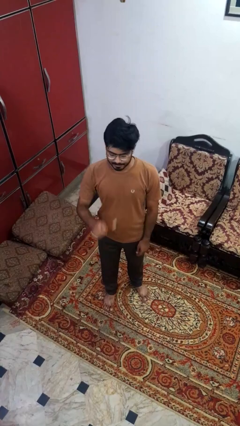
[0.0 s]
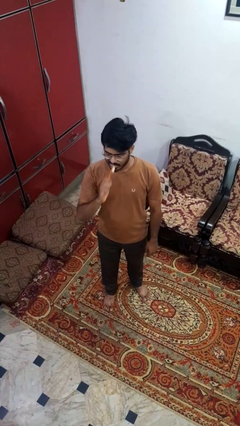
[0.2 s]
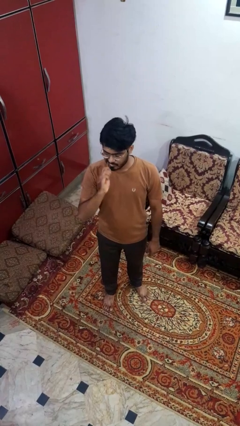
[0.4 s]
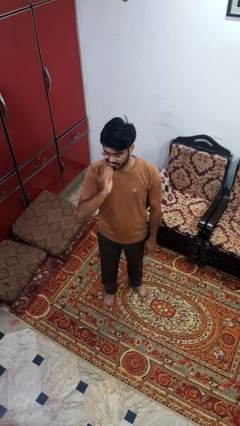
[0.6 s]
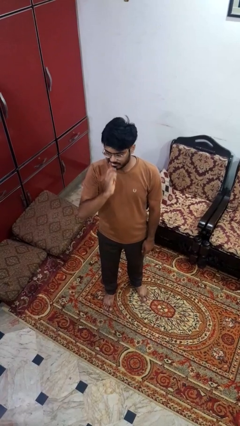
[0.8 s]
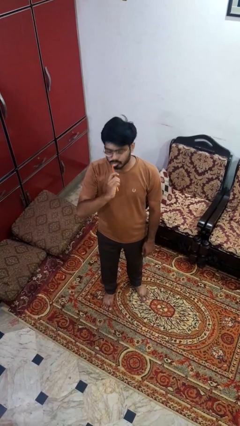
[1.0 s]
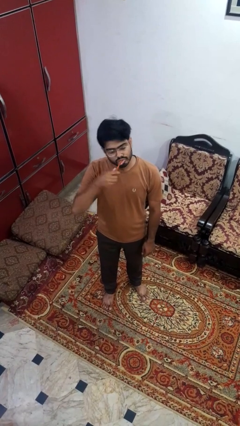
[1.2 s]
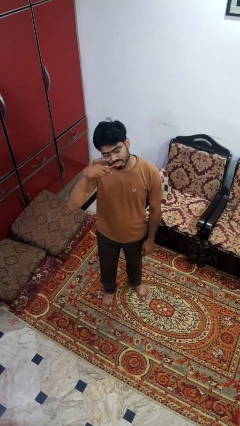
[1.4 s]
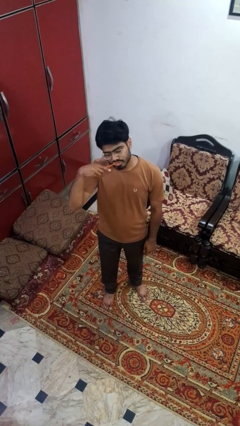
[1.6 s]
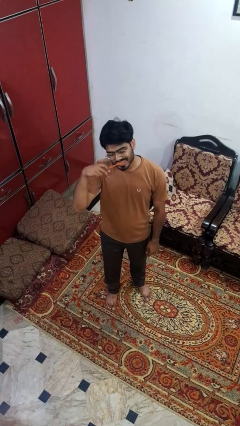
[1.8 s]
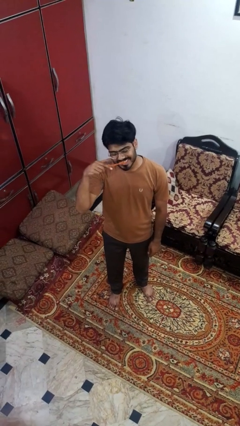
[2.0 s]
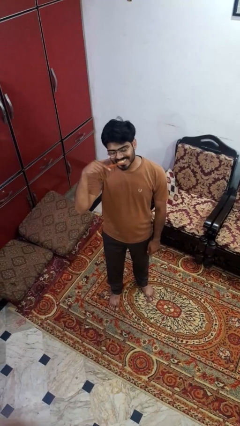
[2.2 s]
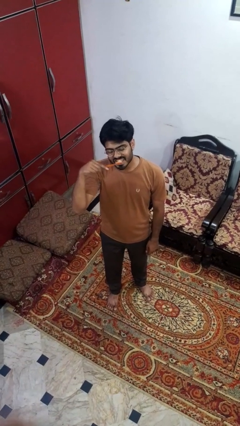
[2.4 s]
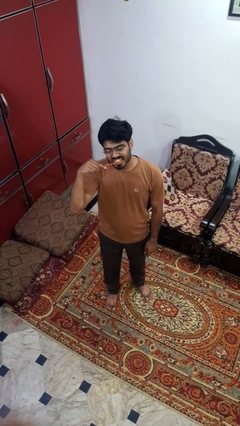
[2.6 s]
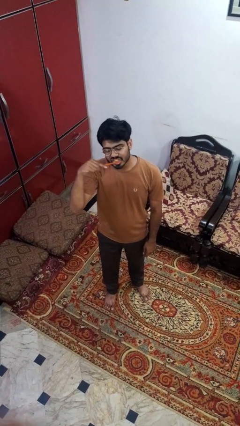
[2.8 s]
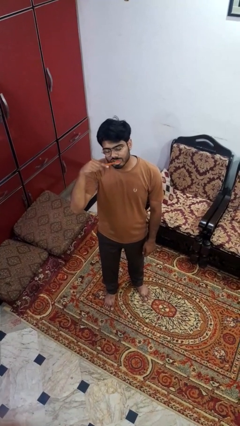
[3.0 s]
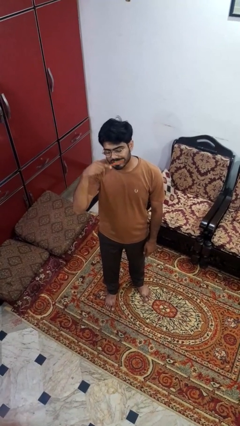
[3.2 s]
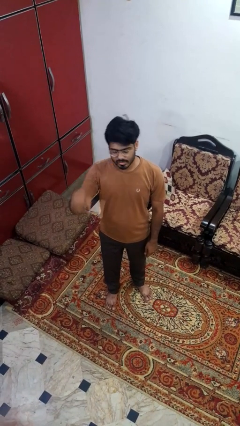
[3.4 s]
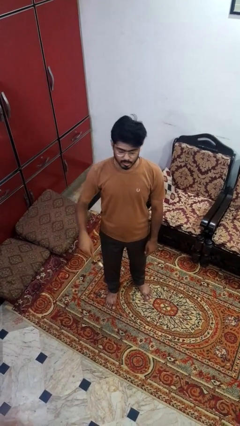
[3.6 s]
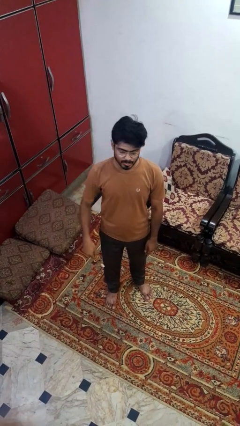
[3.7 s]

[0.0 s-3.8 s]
person brushes teeth

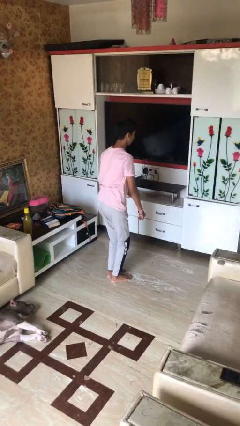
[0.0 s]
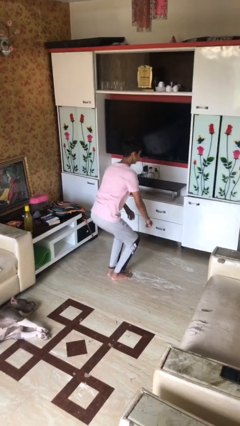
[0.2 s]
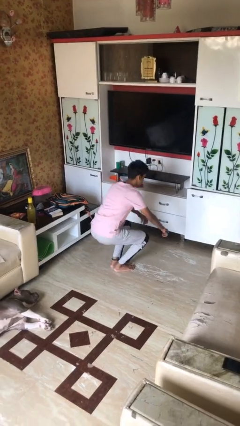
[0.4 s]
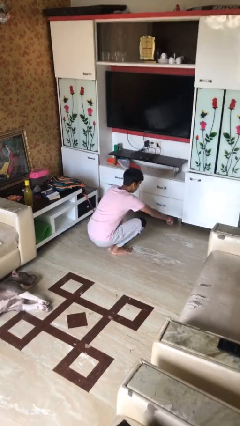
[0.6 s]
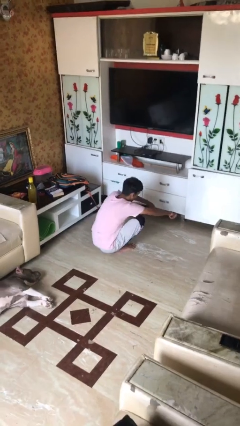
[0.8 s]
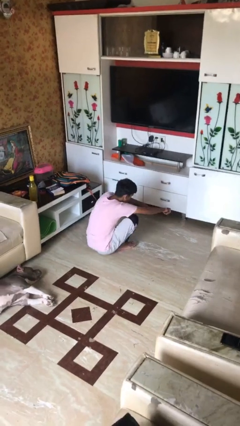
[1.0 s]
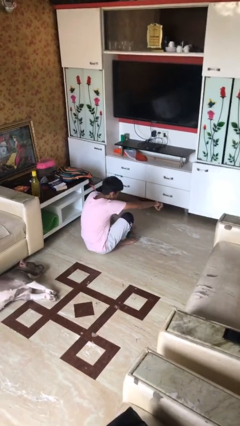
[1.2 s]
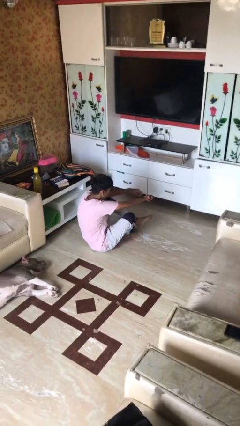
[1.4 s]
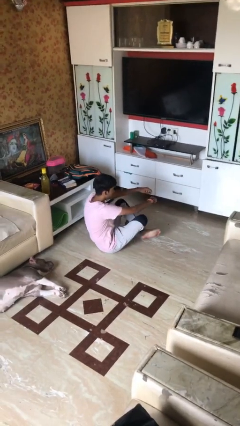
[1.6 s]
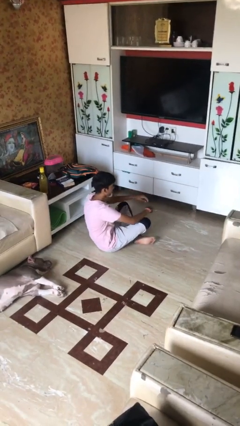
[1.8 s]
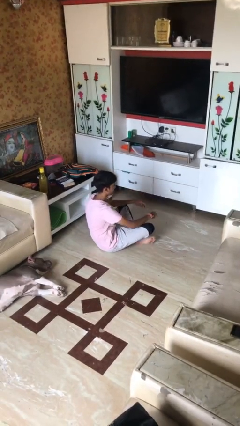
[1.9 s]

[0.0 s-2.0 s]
person sits crisscross

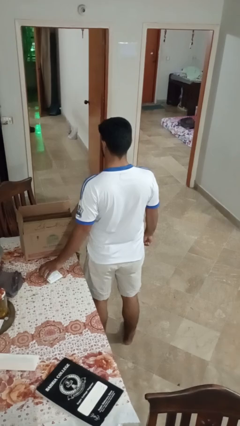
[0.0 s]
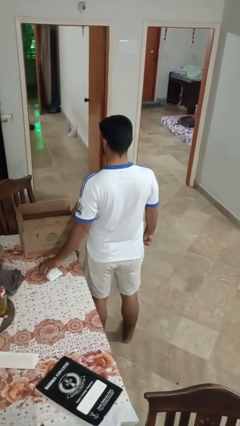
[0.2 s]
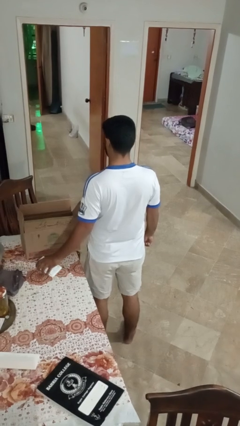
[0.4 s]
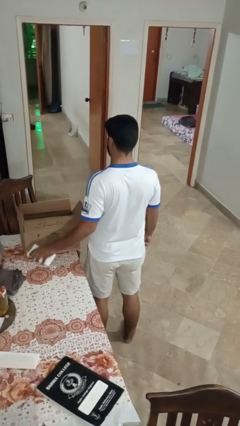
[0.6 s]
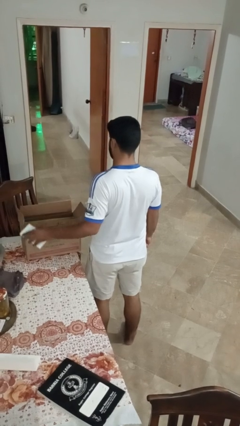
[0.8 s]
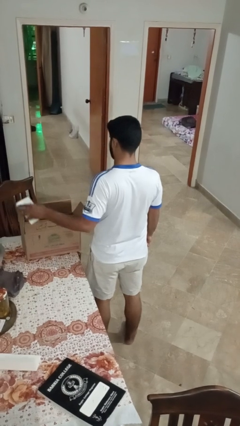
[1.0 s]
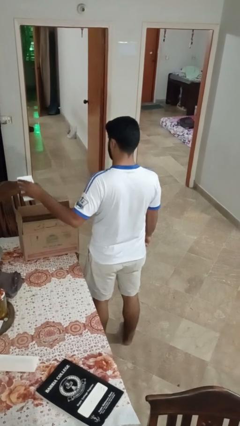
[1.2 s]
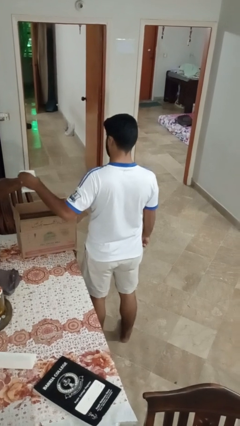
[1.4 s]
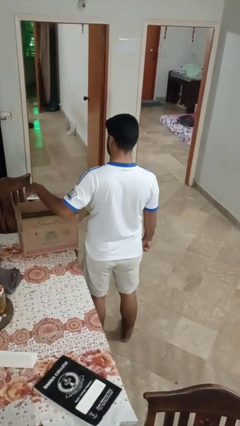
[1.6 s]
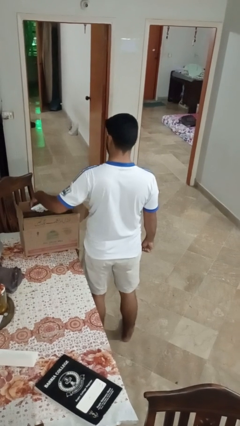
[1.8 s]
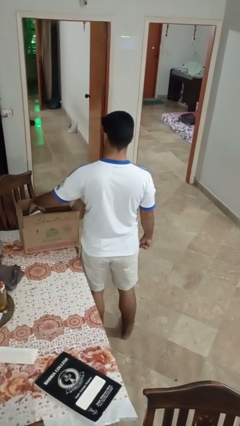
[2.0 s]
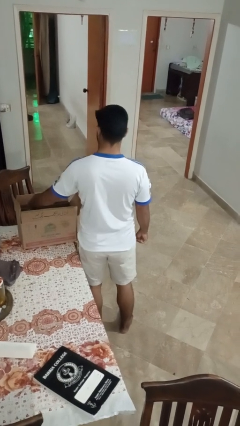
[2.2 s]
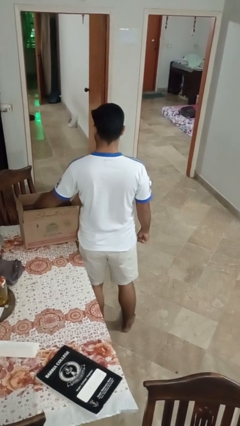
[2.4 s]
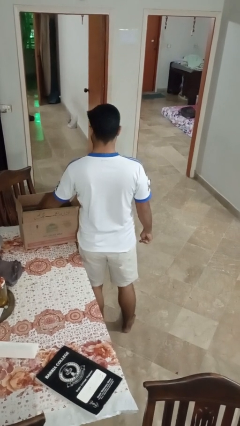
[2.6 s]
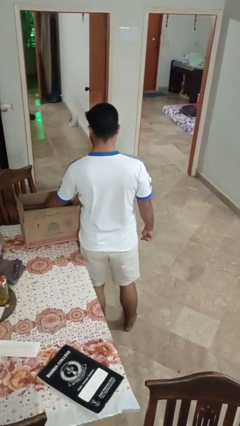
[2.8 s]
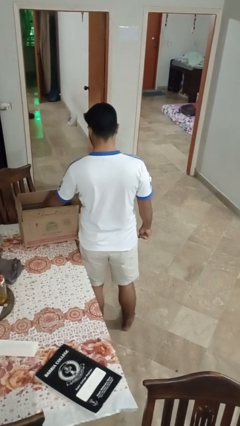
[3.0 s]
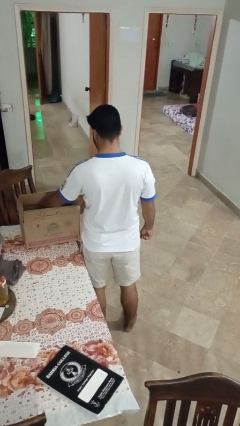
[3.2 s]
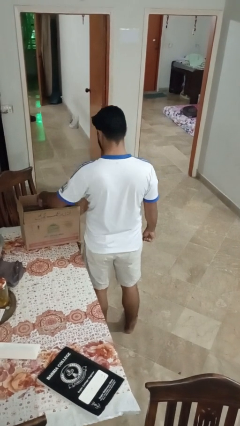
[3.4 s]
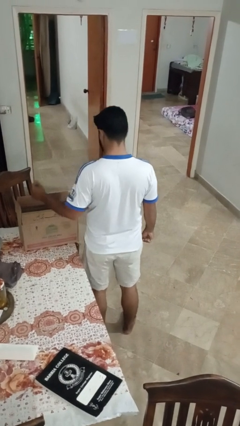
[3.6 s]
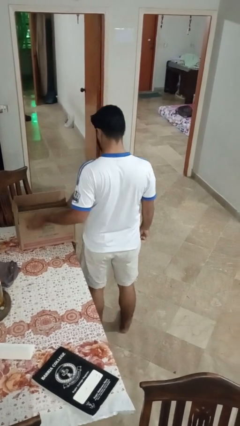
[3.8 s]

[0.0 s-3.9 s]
person puts object into box

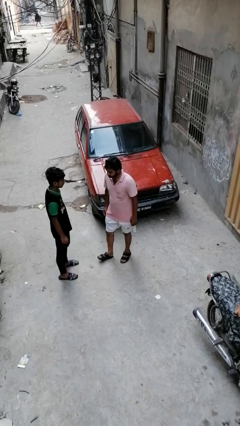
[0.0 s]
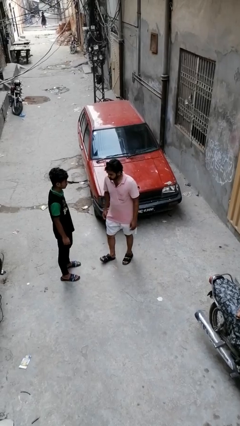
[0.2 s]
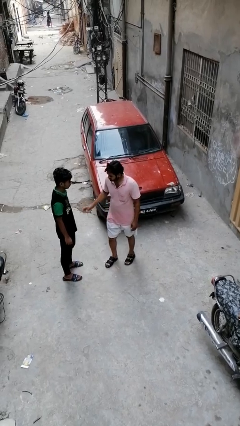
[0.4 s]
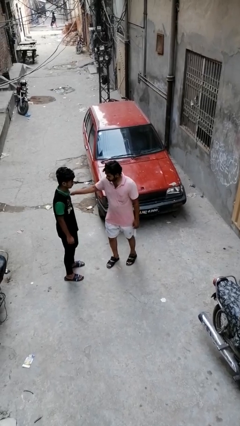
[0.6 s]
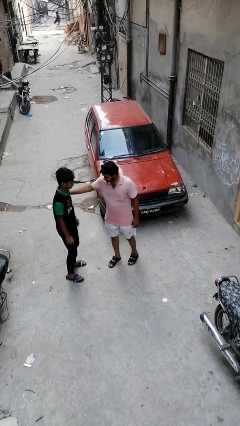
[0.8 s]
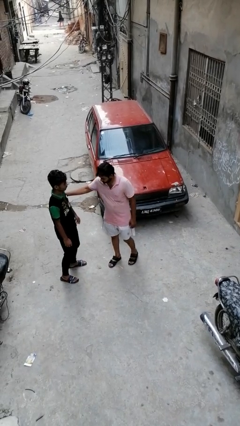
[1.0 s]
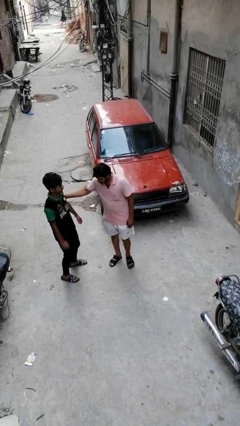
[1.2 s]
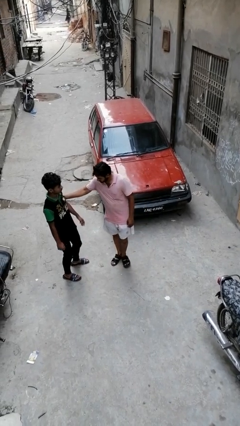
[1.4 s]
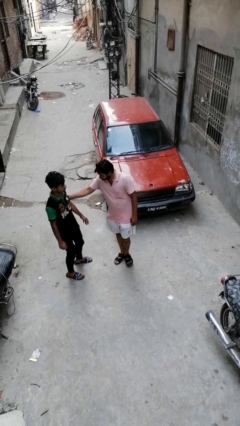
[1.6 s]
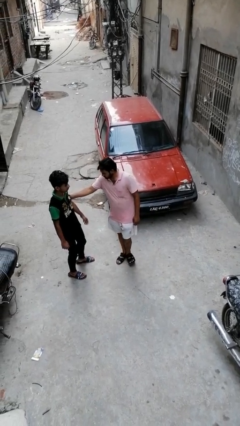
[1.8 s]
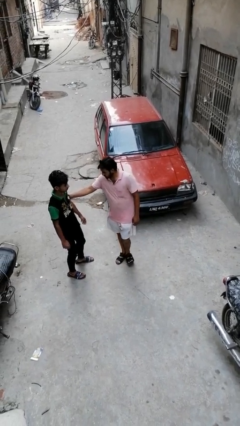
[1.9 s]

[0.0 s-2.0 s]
person grabs person by bicep

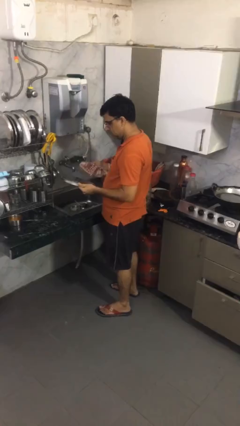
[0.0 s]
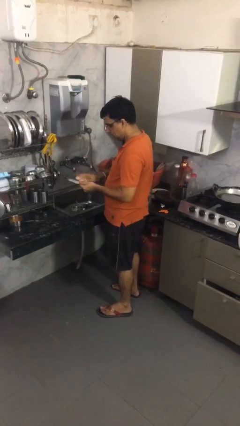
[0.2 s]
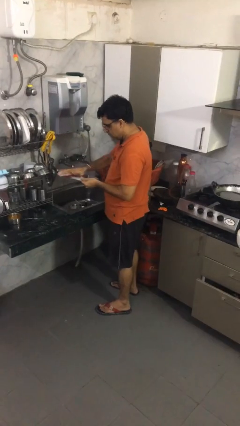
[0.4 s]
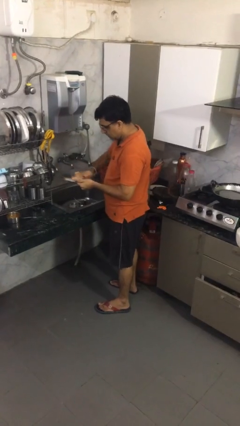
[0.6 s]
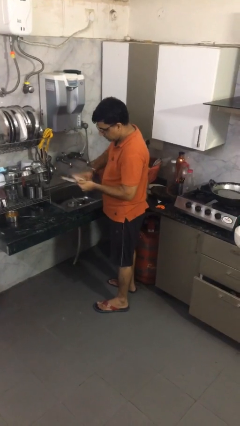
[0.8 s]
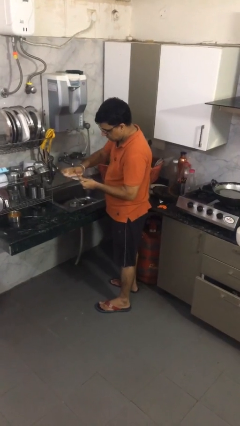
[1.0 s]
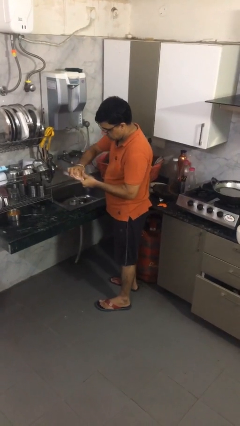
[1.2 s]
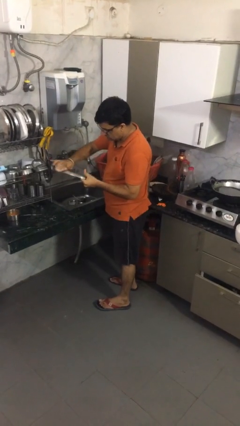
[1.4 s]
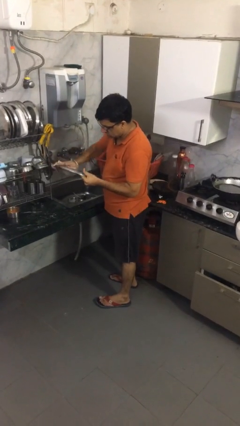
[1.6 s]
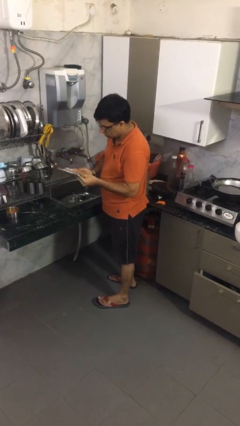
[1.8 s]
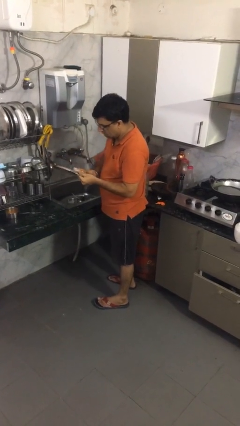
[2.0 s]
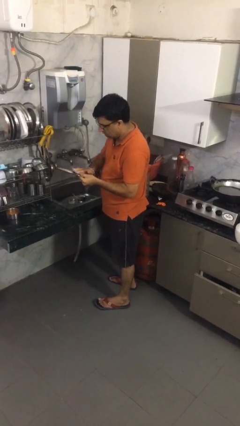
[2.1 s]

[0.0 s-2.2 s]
person dries dish

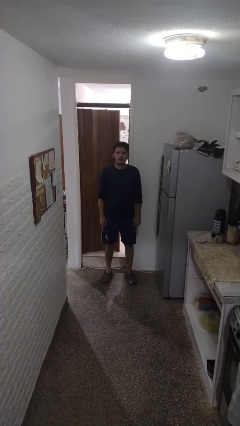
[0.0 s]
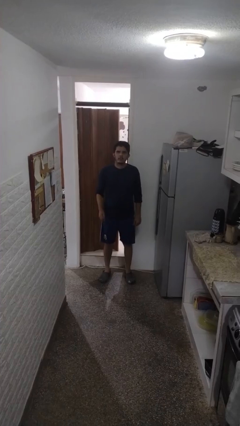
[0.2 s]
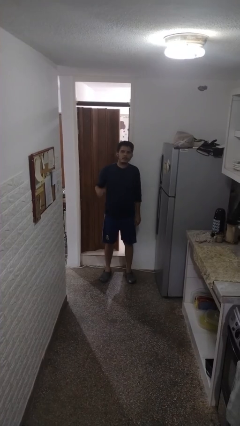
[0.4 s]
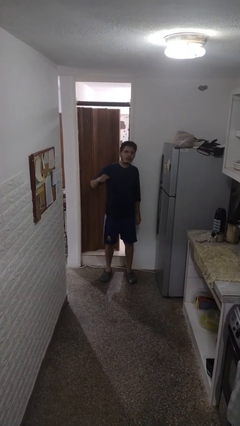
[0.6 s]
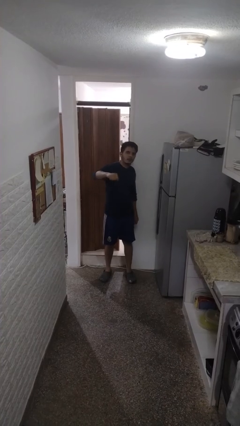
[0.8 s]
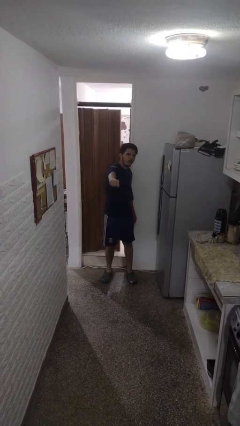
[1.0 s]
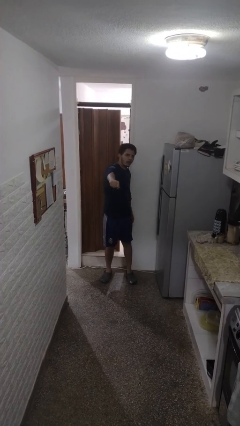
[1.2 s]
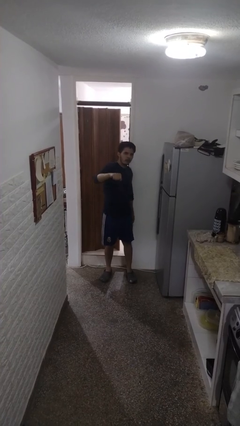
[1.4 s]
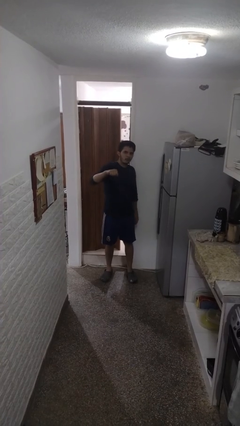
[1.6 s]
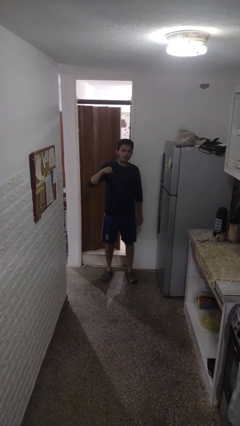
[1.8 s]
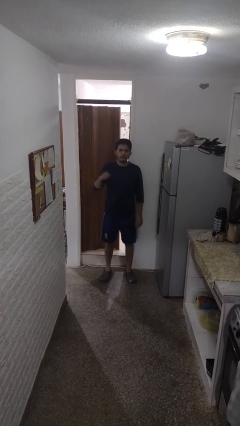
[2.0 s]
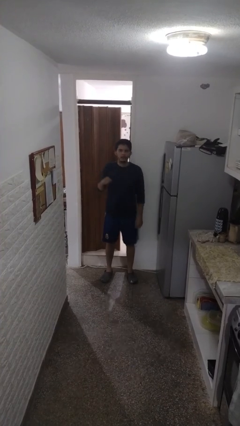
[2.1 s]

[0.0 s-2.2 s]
person punches

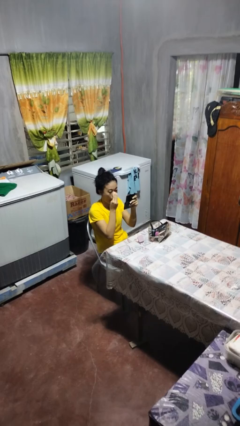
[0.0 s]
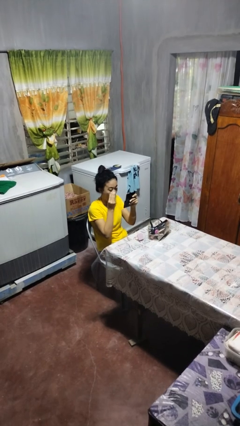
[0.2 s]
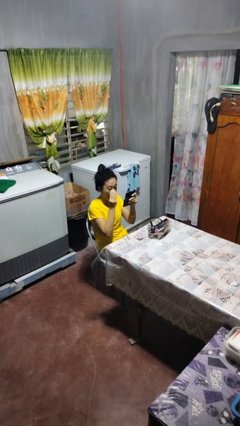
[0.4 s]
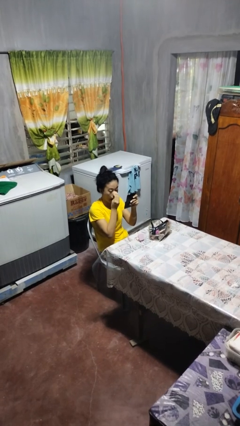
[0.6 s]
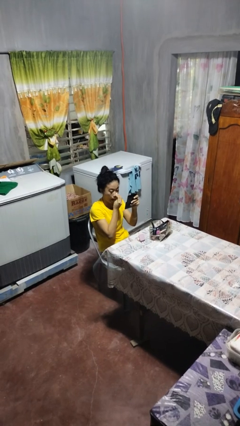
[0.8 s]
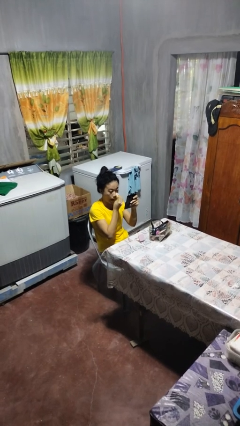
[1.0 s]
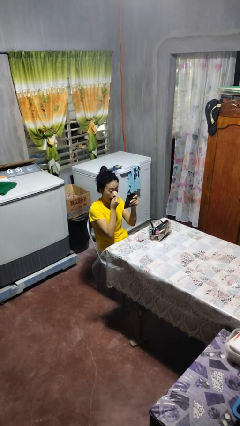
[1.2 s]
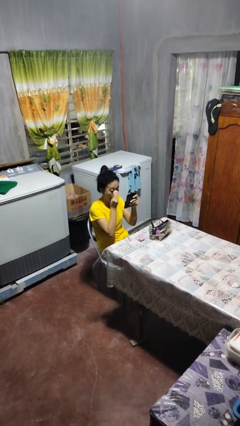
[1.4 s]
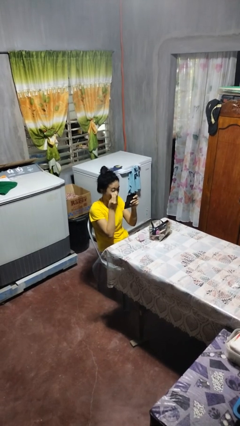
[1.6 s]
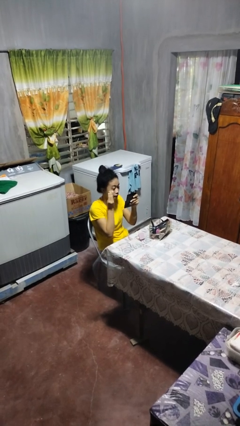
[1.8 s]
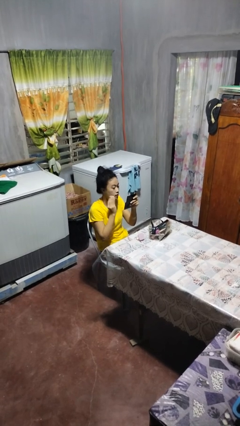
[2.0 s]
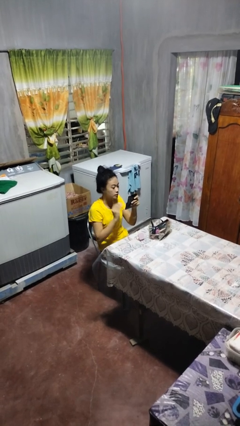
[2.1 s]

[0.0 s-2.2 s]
person applies foundation makeup
